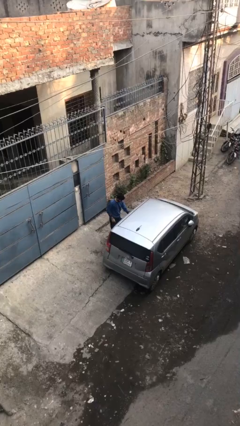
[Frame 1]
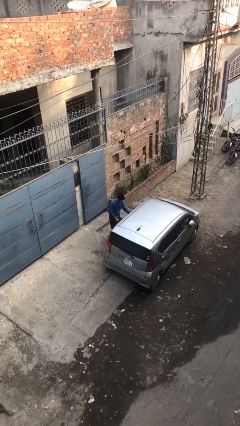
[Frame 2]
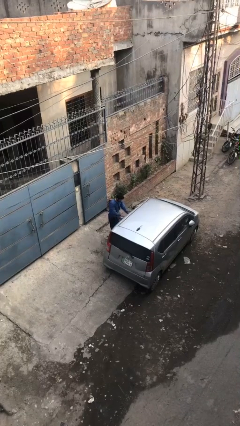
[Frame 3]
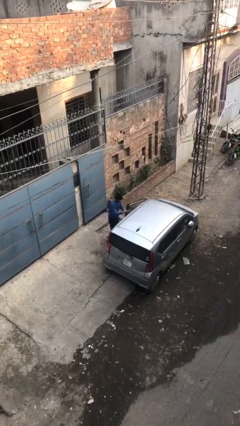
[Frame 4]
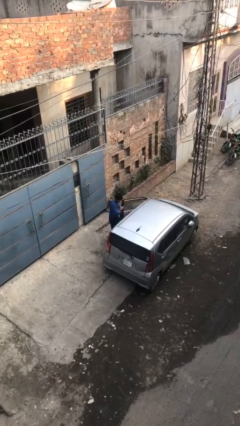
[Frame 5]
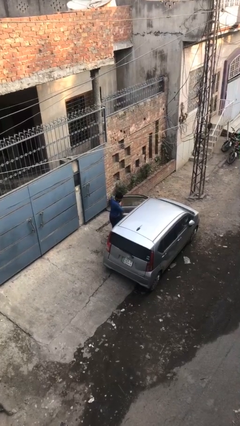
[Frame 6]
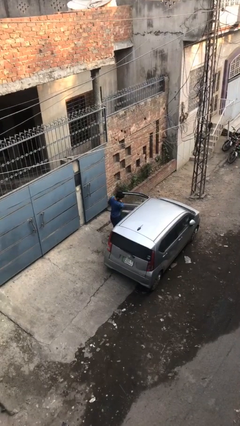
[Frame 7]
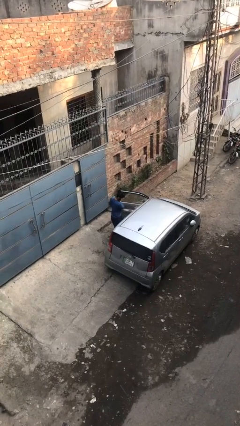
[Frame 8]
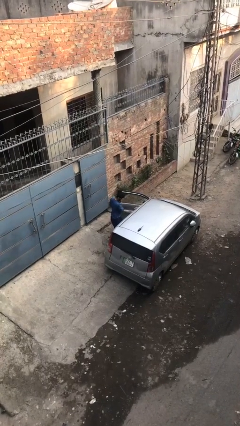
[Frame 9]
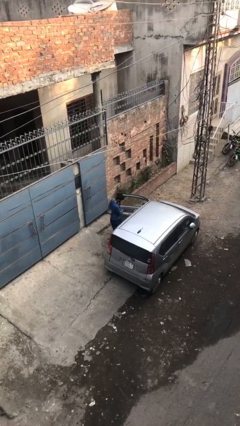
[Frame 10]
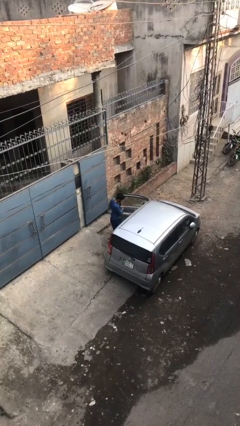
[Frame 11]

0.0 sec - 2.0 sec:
person opens car door

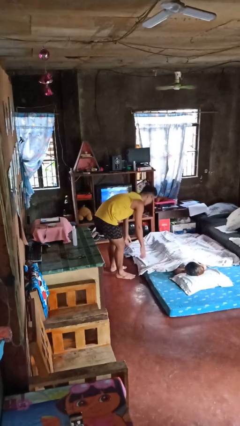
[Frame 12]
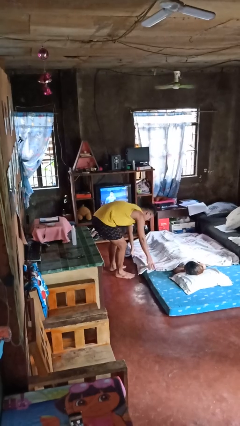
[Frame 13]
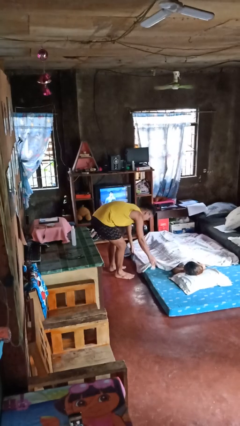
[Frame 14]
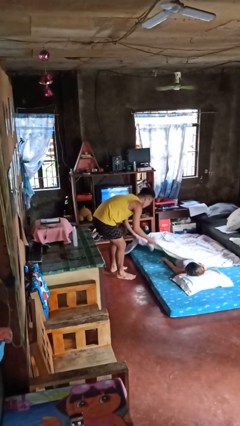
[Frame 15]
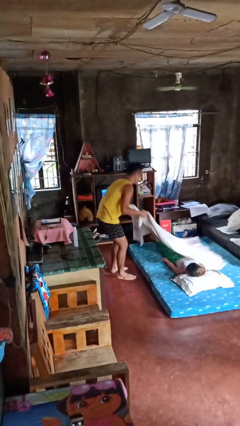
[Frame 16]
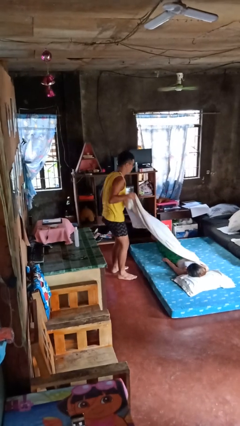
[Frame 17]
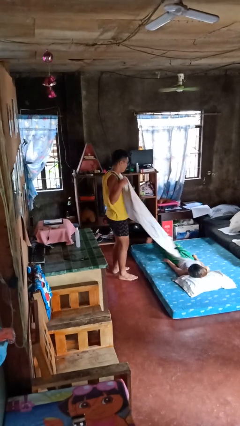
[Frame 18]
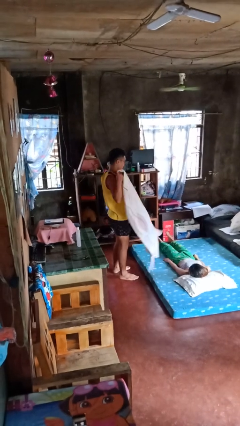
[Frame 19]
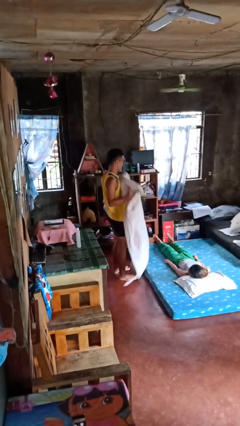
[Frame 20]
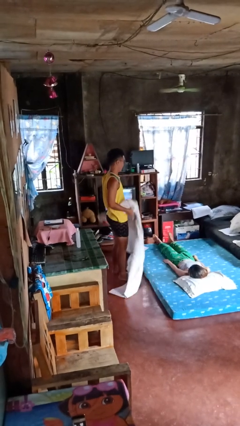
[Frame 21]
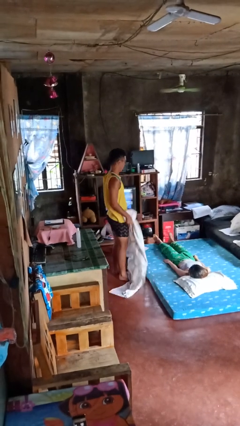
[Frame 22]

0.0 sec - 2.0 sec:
person uncovers friend with blanket

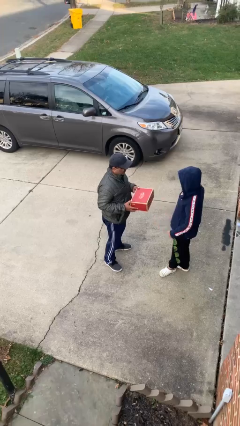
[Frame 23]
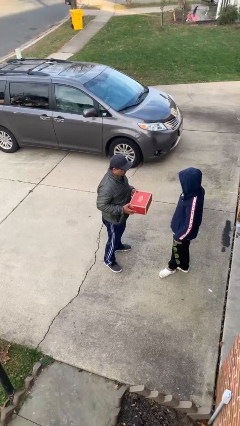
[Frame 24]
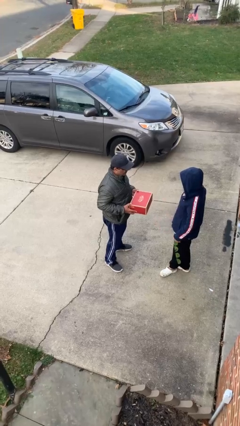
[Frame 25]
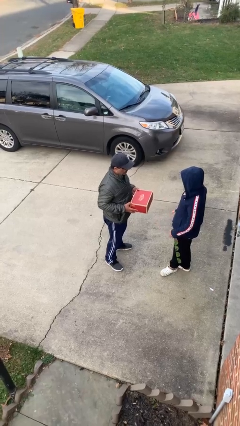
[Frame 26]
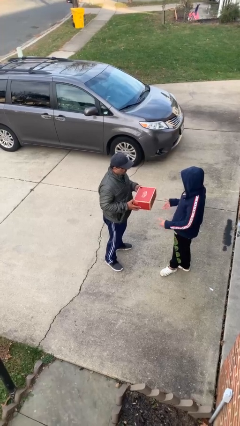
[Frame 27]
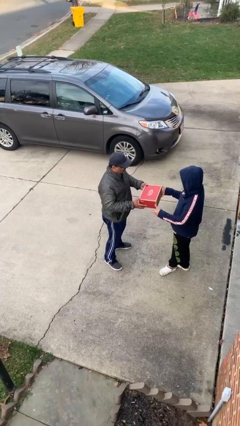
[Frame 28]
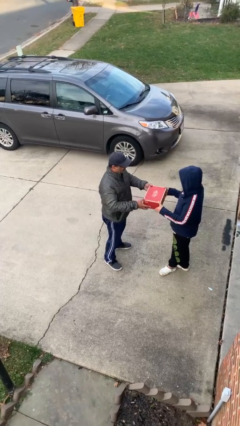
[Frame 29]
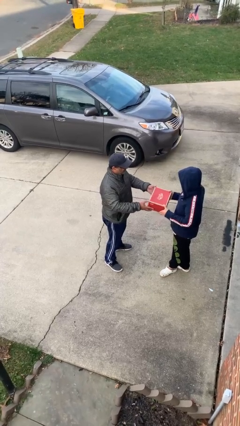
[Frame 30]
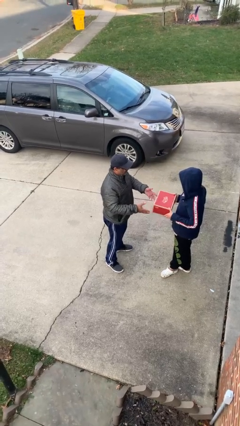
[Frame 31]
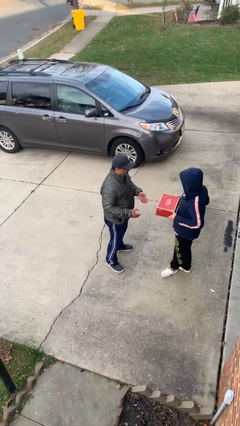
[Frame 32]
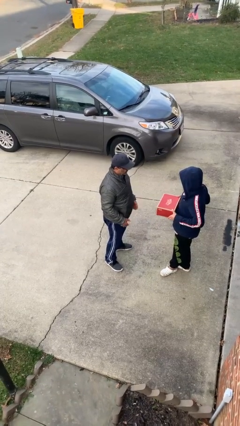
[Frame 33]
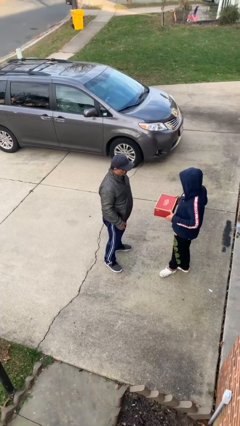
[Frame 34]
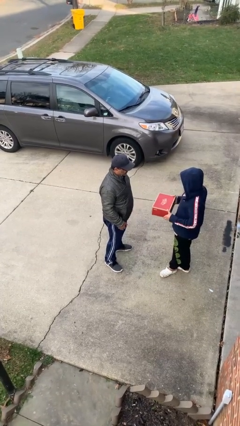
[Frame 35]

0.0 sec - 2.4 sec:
person transfers object to person

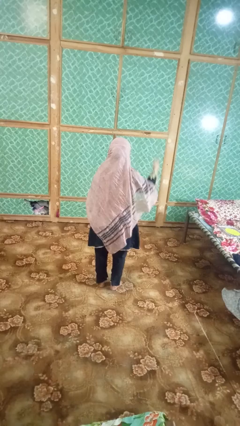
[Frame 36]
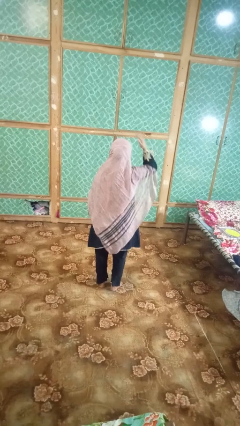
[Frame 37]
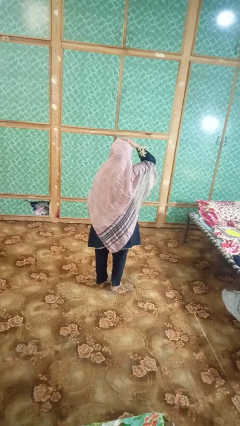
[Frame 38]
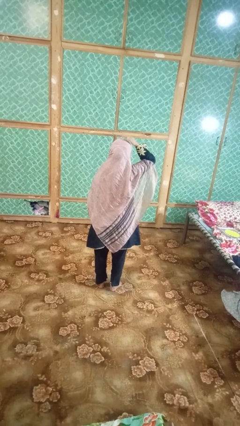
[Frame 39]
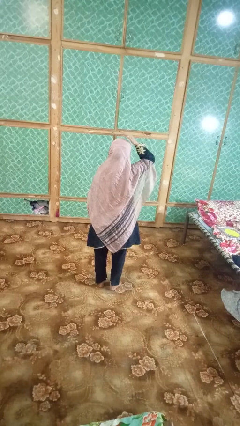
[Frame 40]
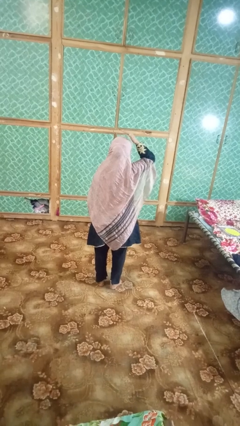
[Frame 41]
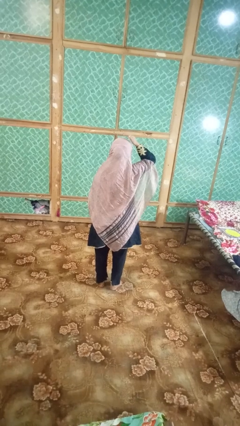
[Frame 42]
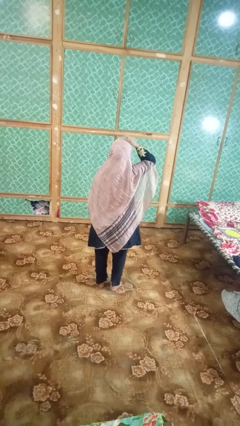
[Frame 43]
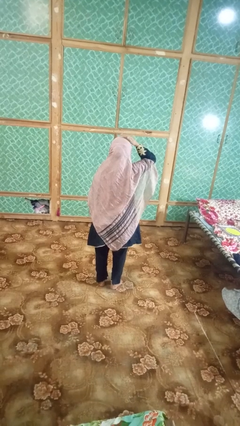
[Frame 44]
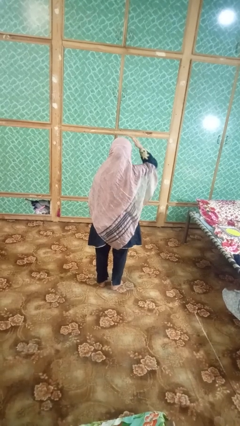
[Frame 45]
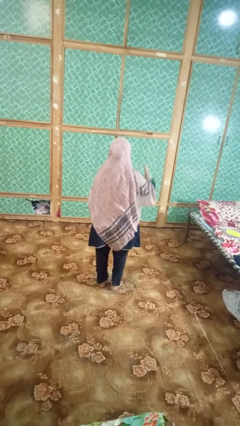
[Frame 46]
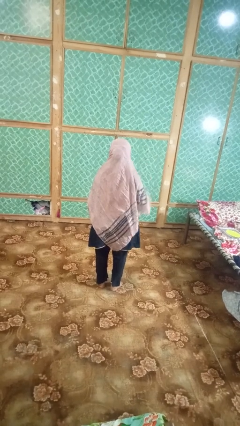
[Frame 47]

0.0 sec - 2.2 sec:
person pats head

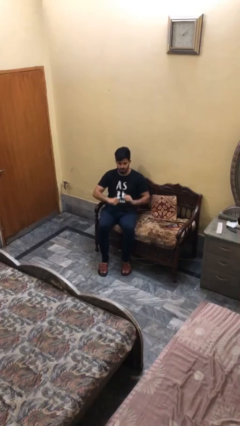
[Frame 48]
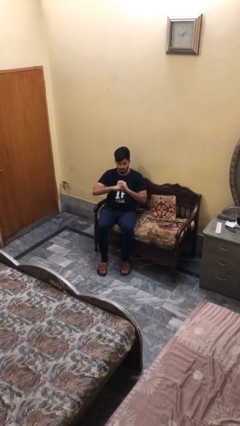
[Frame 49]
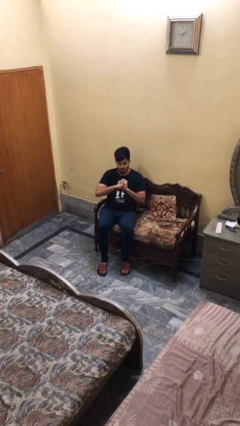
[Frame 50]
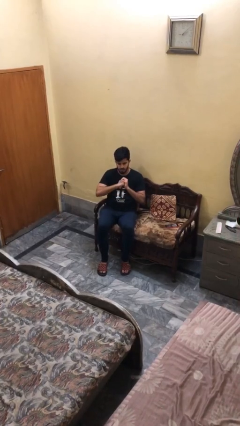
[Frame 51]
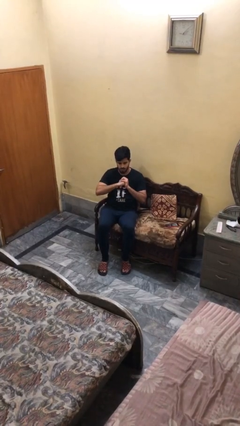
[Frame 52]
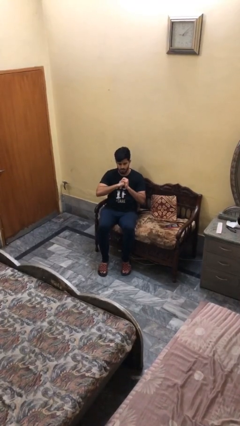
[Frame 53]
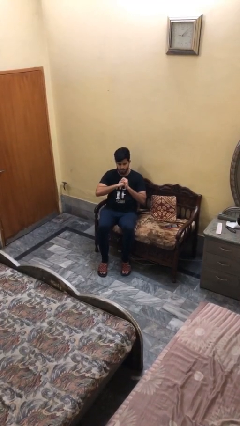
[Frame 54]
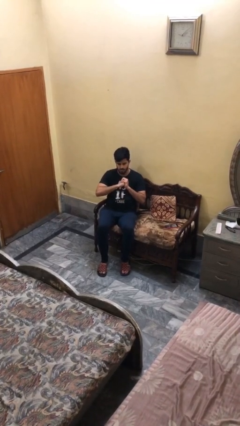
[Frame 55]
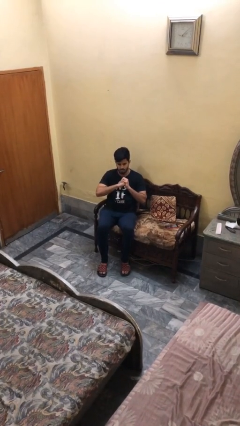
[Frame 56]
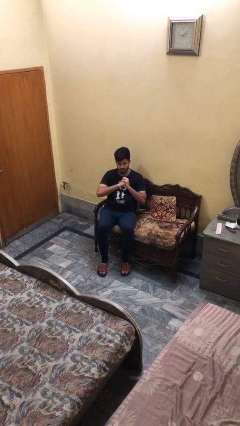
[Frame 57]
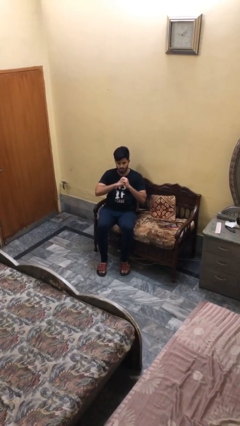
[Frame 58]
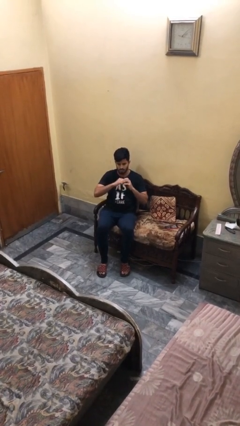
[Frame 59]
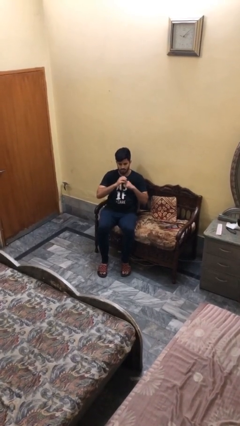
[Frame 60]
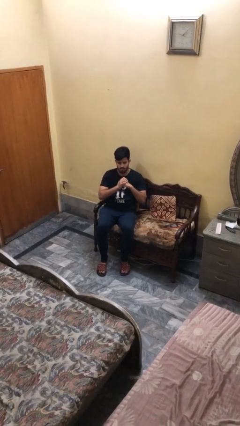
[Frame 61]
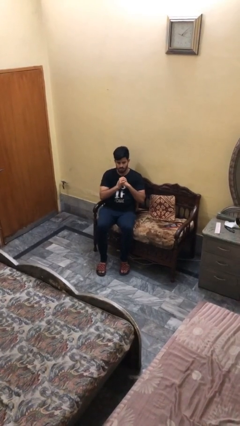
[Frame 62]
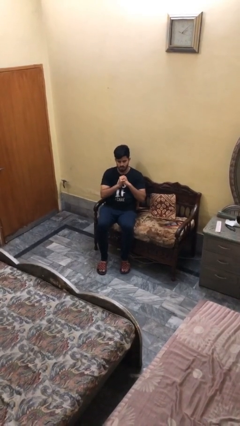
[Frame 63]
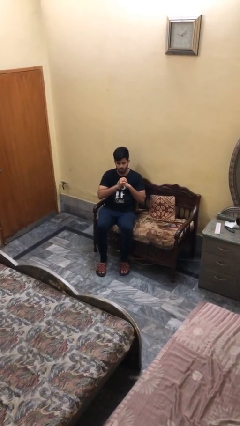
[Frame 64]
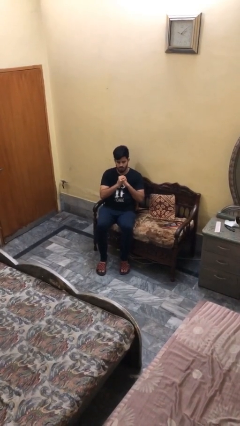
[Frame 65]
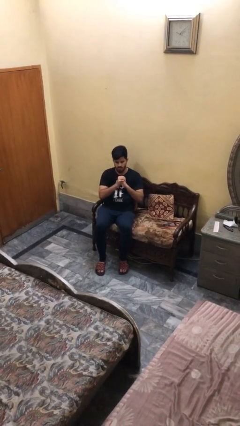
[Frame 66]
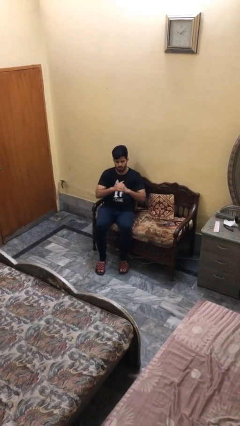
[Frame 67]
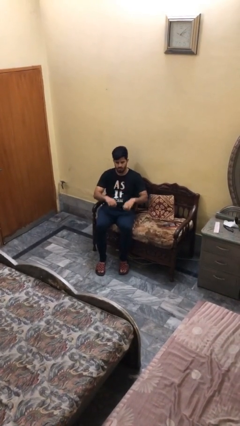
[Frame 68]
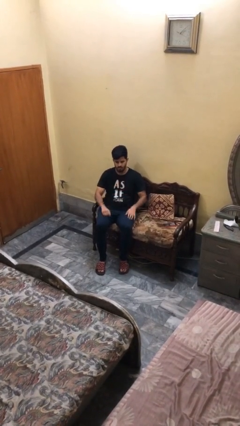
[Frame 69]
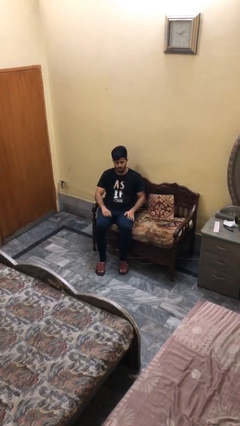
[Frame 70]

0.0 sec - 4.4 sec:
person cracks knuckles

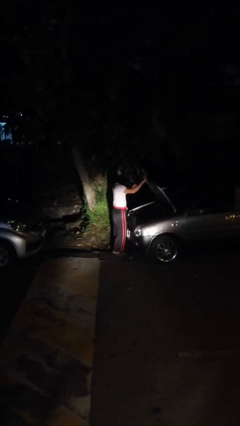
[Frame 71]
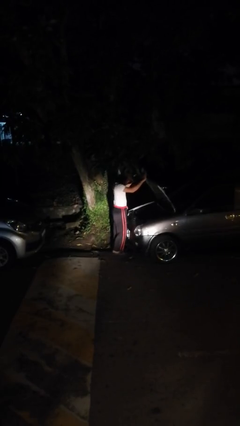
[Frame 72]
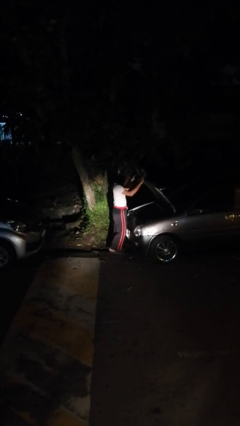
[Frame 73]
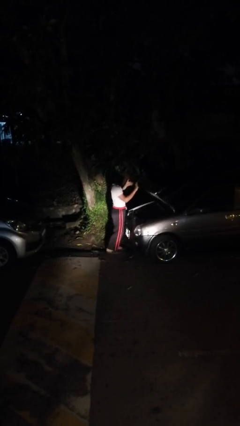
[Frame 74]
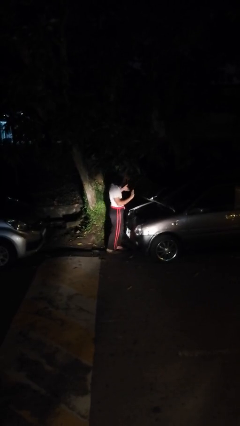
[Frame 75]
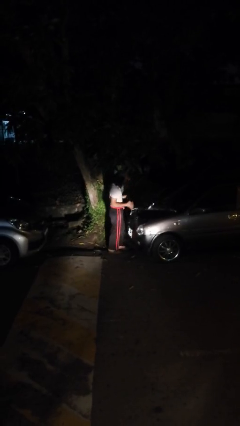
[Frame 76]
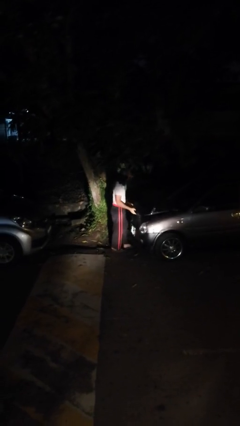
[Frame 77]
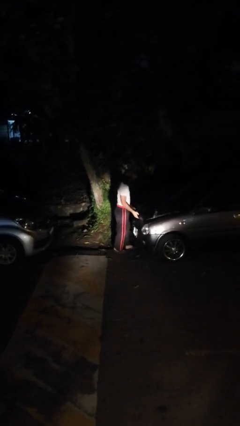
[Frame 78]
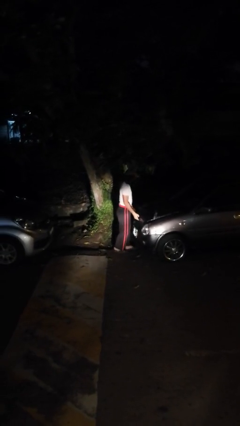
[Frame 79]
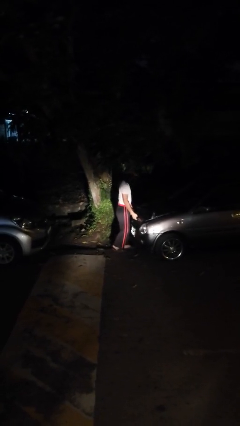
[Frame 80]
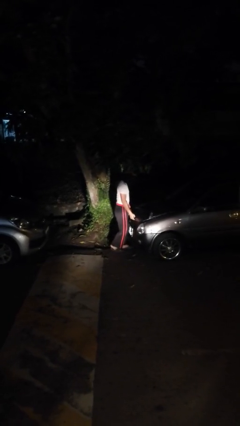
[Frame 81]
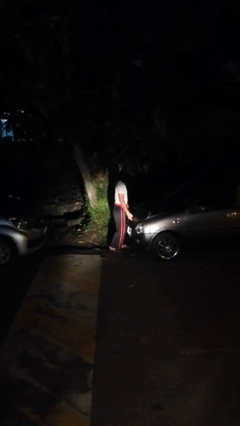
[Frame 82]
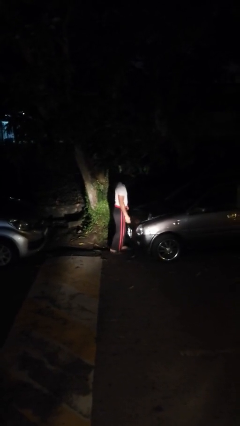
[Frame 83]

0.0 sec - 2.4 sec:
person closes car hood

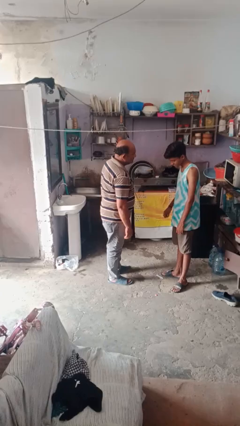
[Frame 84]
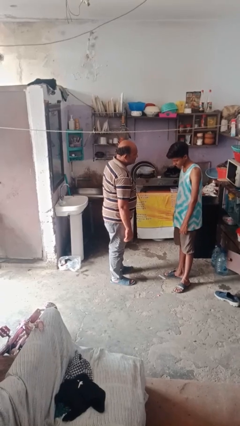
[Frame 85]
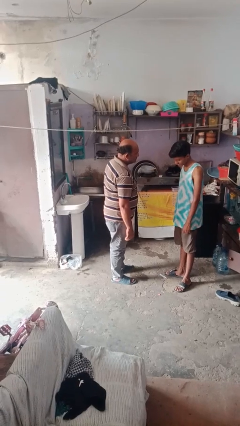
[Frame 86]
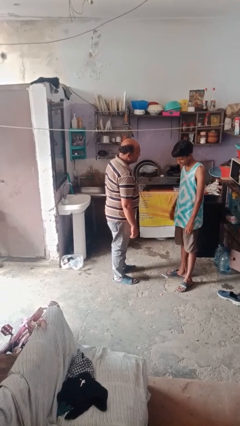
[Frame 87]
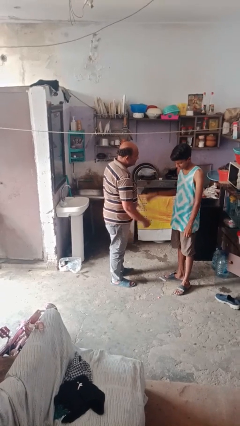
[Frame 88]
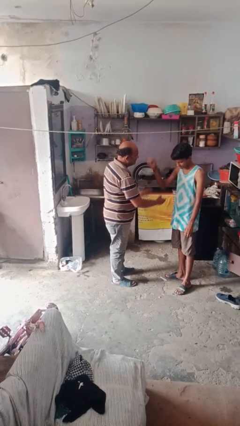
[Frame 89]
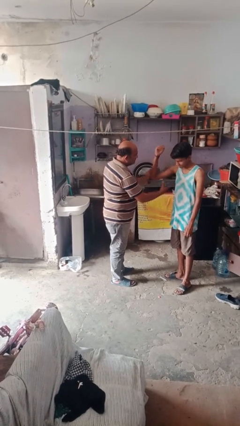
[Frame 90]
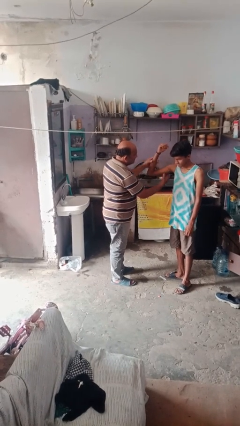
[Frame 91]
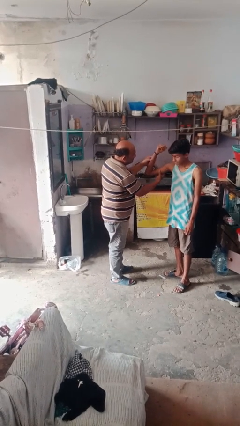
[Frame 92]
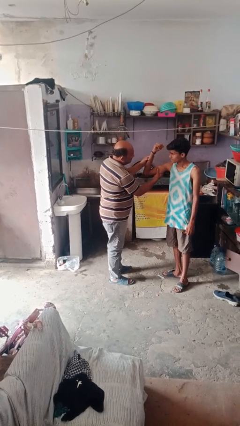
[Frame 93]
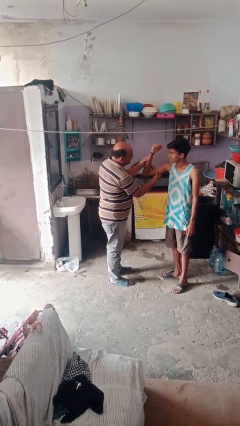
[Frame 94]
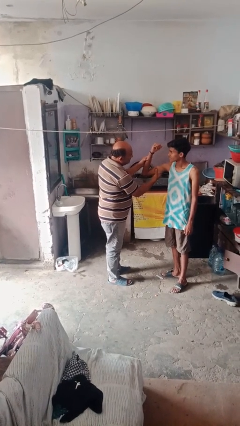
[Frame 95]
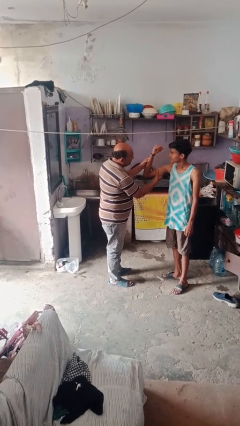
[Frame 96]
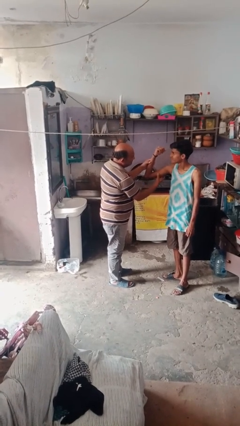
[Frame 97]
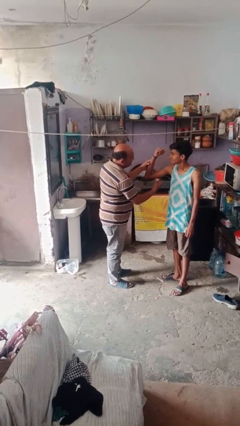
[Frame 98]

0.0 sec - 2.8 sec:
person grabs person by bicep